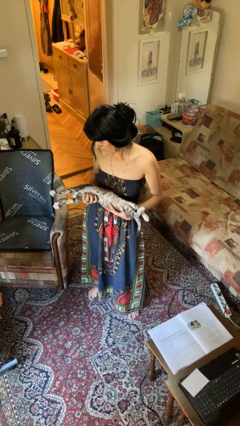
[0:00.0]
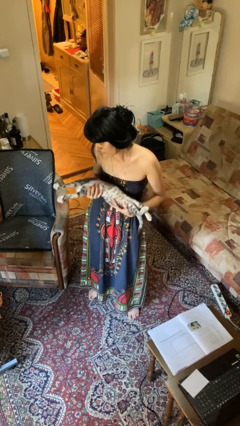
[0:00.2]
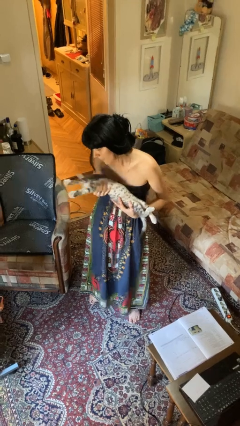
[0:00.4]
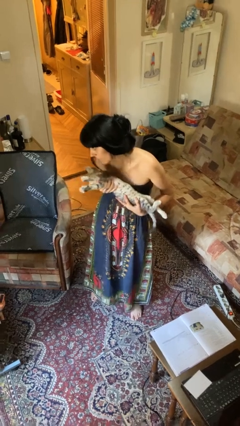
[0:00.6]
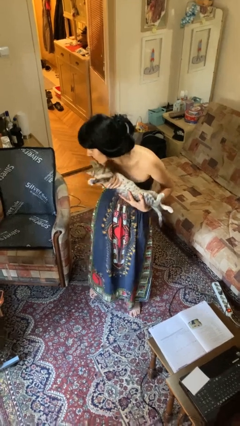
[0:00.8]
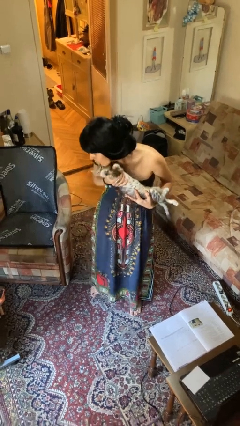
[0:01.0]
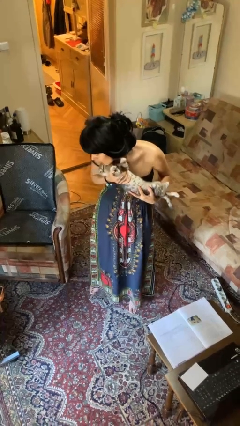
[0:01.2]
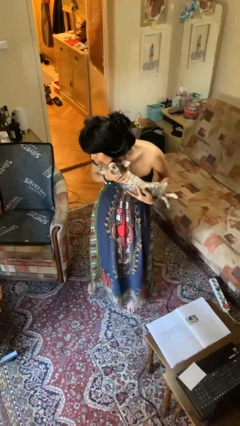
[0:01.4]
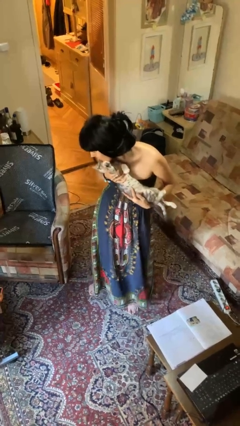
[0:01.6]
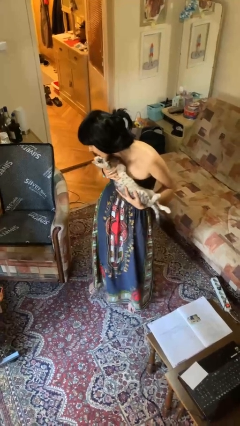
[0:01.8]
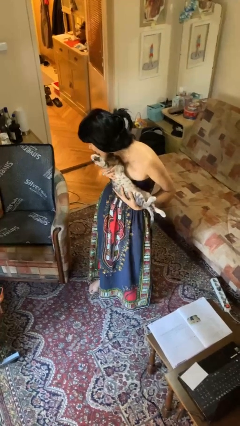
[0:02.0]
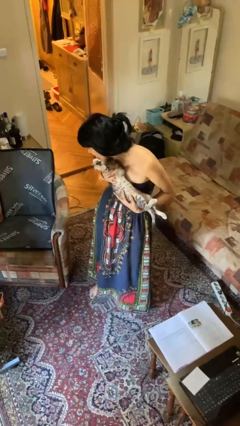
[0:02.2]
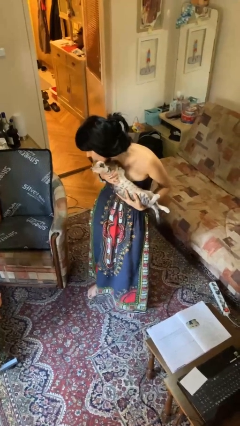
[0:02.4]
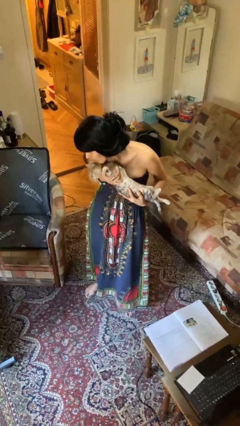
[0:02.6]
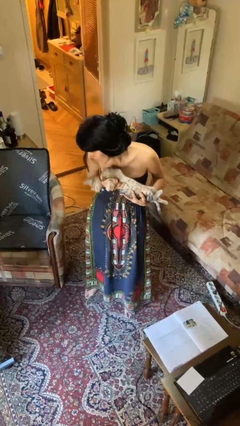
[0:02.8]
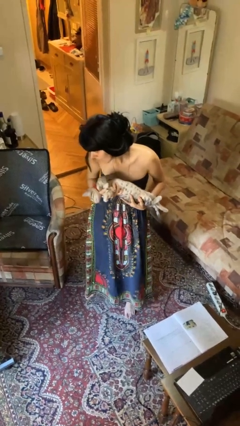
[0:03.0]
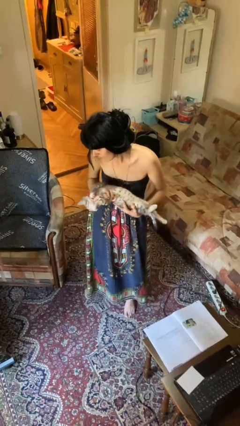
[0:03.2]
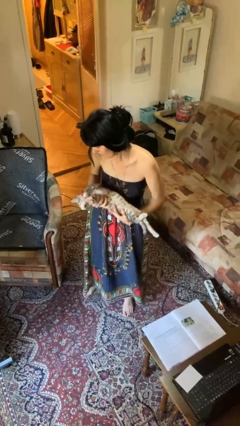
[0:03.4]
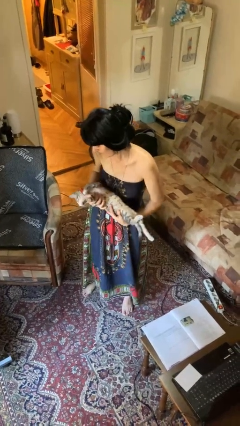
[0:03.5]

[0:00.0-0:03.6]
person hugs cat

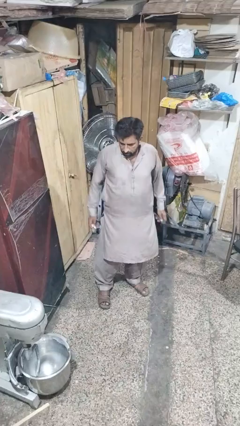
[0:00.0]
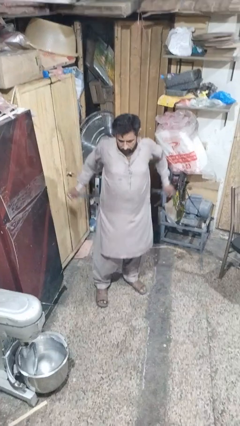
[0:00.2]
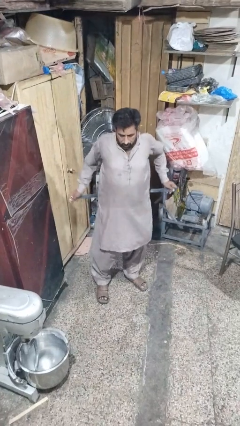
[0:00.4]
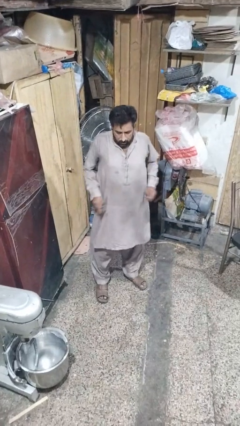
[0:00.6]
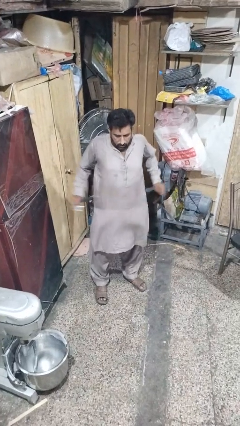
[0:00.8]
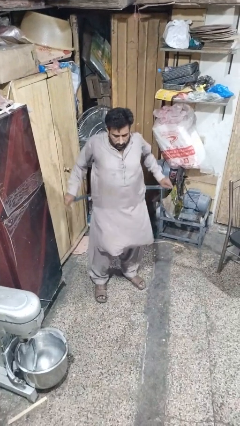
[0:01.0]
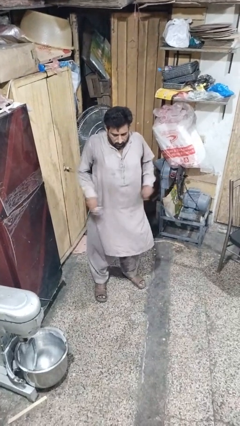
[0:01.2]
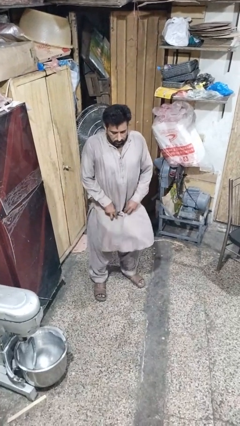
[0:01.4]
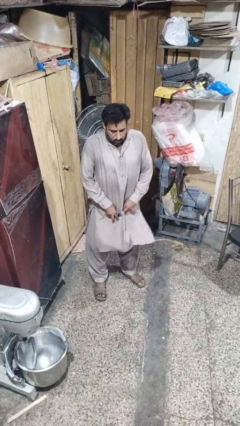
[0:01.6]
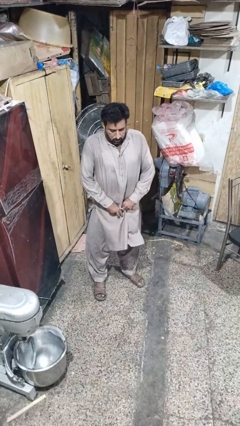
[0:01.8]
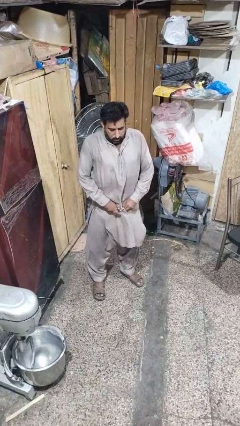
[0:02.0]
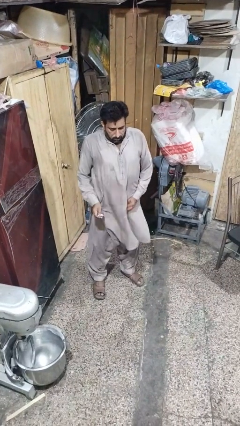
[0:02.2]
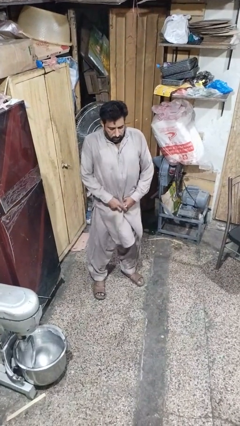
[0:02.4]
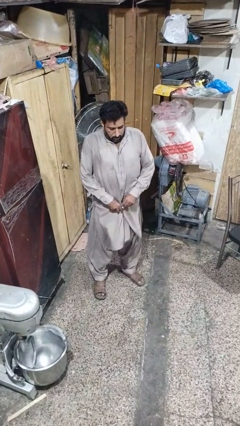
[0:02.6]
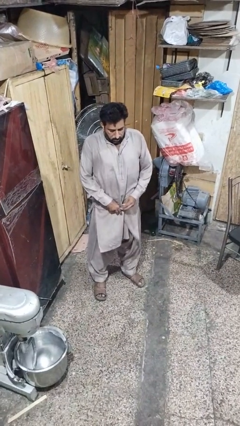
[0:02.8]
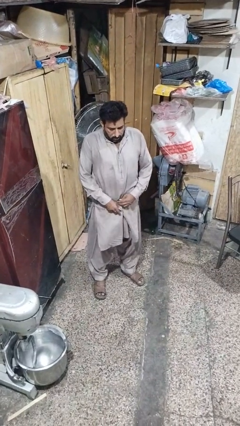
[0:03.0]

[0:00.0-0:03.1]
person puts on belt

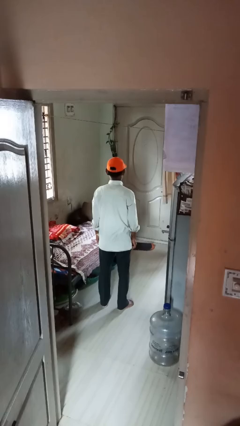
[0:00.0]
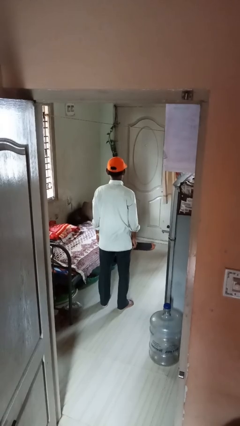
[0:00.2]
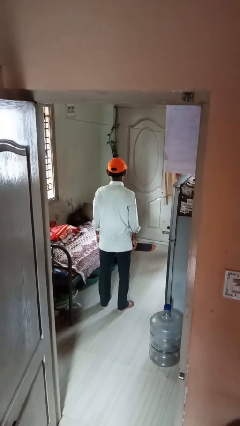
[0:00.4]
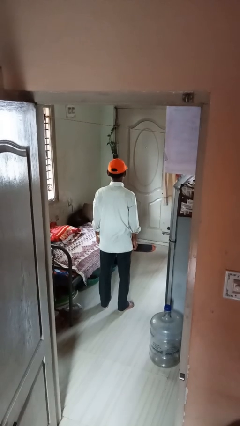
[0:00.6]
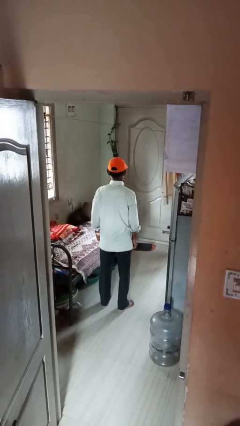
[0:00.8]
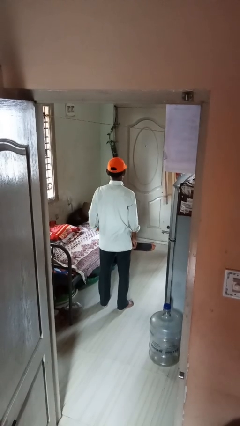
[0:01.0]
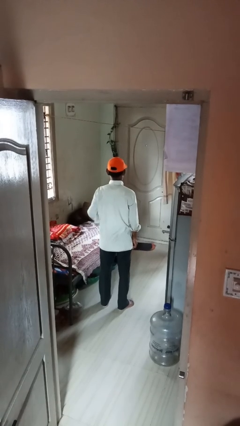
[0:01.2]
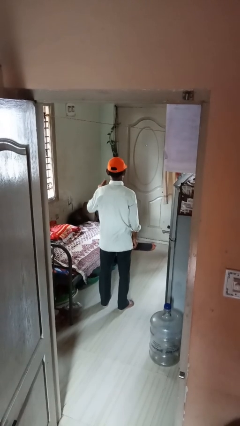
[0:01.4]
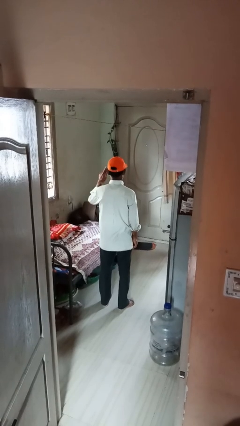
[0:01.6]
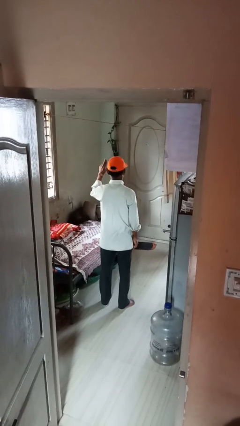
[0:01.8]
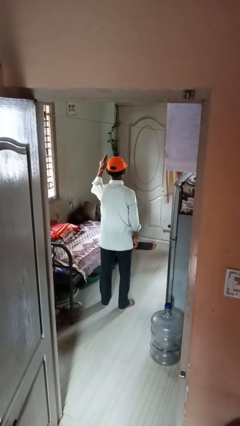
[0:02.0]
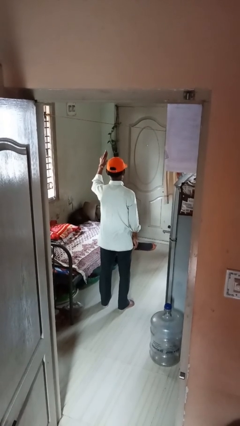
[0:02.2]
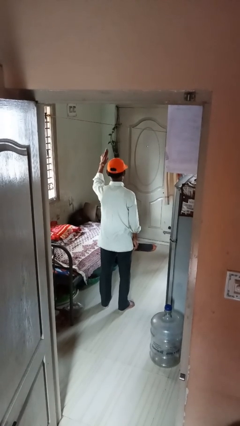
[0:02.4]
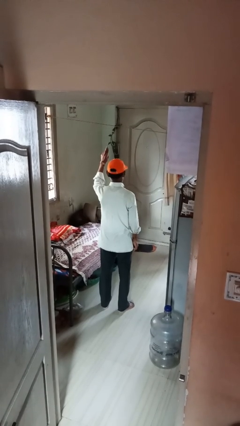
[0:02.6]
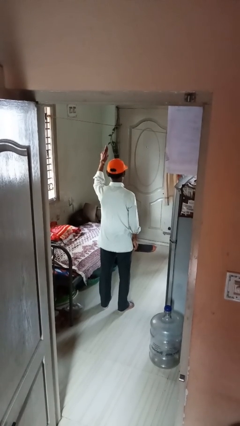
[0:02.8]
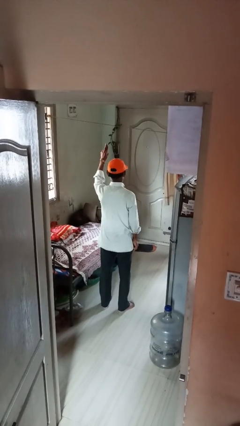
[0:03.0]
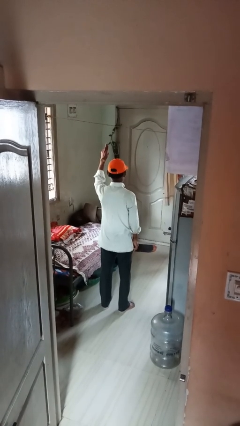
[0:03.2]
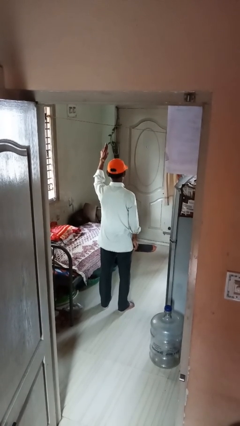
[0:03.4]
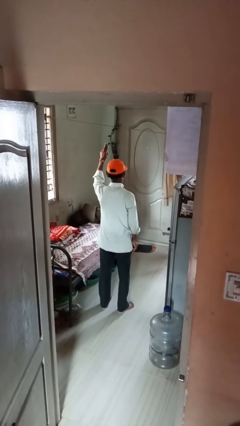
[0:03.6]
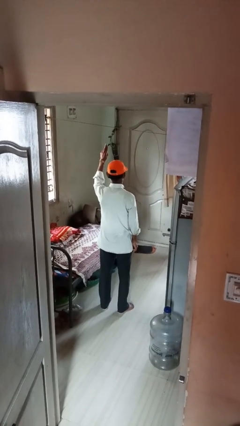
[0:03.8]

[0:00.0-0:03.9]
person gestures swipe up

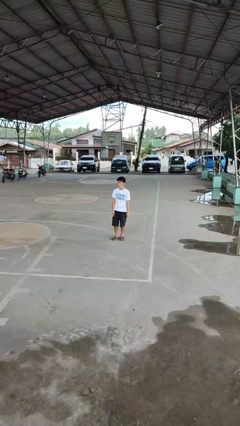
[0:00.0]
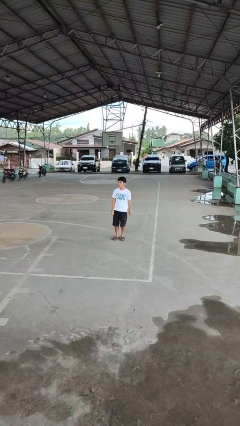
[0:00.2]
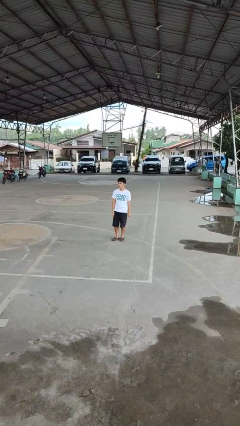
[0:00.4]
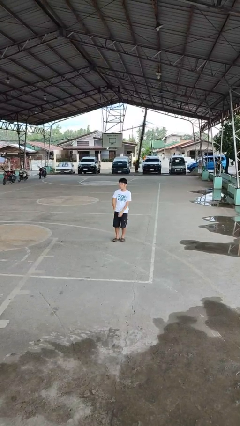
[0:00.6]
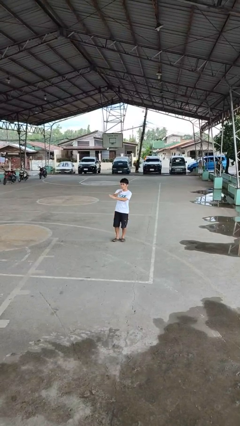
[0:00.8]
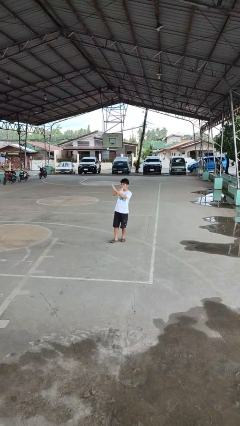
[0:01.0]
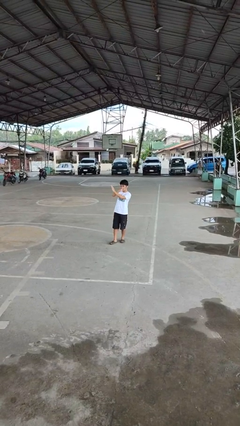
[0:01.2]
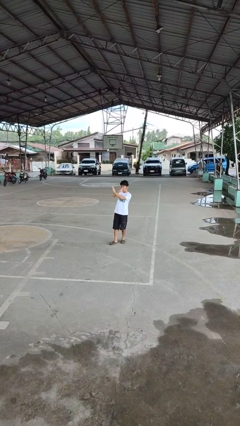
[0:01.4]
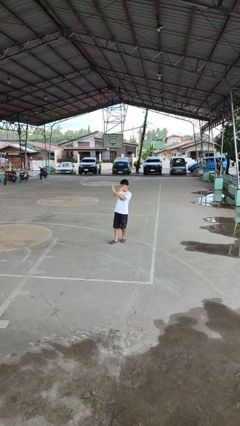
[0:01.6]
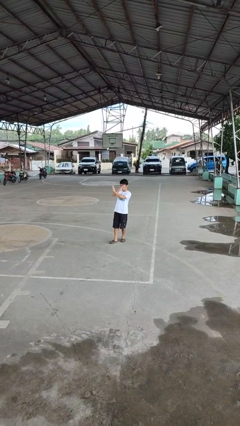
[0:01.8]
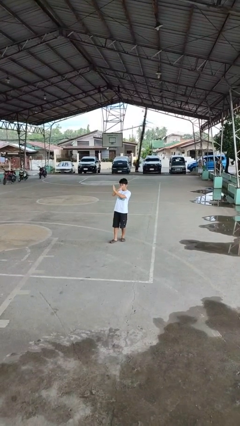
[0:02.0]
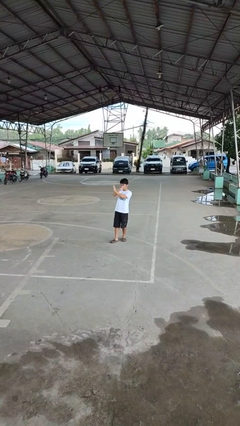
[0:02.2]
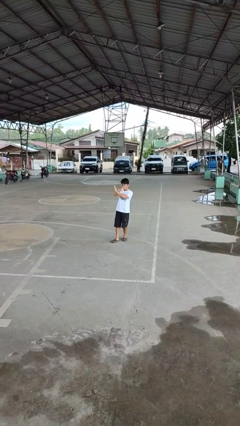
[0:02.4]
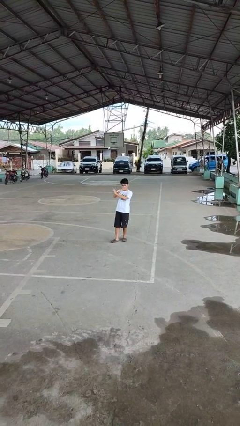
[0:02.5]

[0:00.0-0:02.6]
person gestures arms x

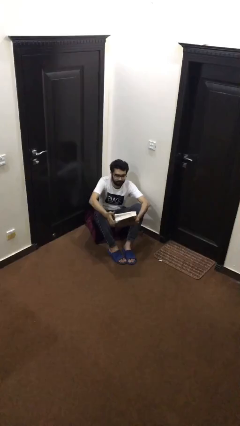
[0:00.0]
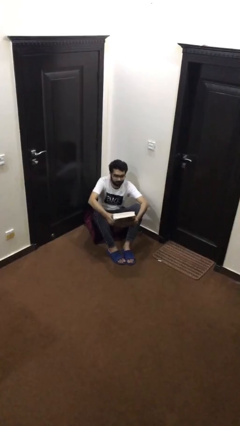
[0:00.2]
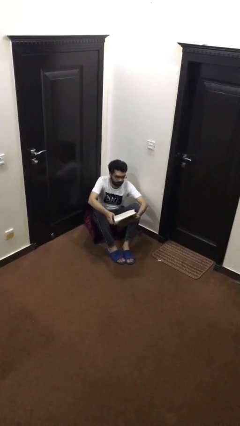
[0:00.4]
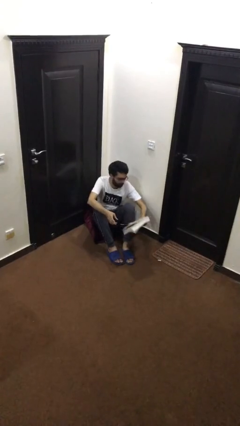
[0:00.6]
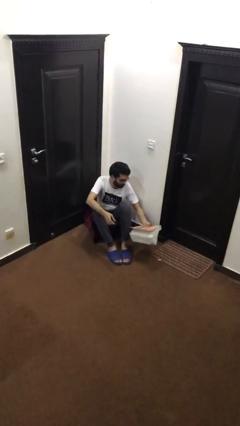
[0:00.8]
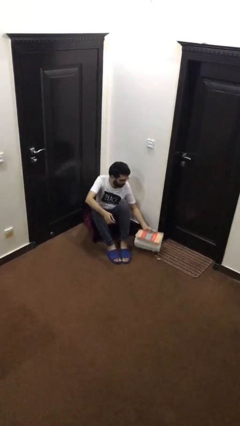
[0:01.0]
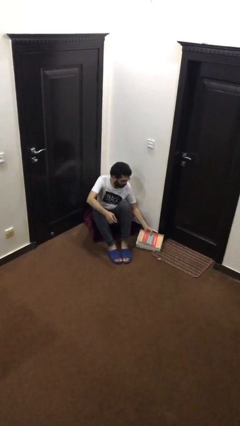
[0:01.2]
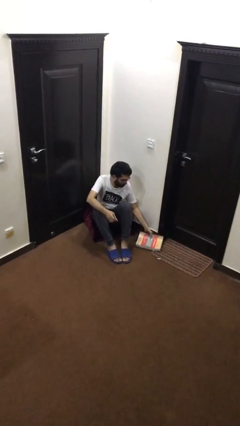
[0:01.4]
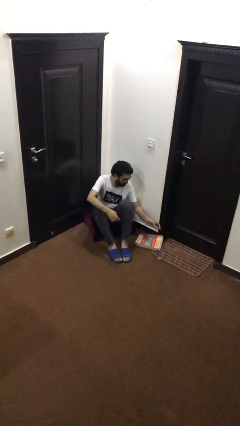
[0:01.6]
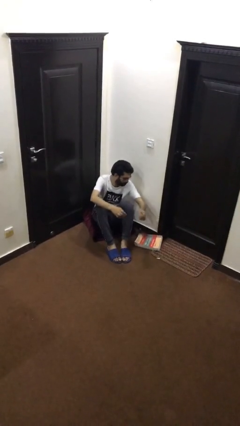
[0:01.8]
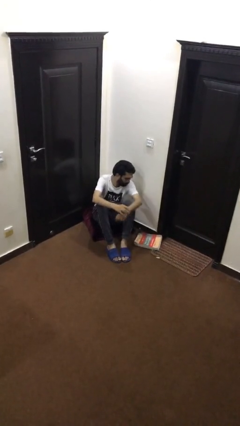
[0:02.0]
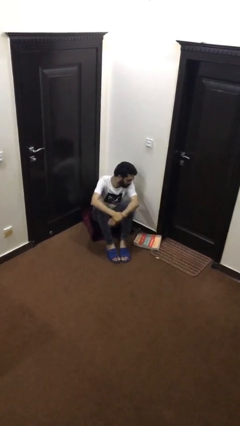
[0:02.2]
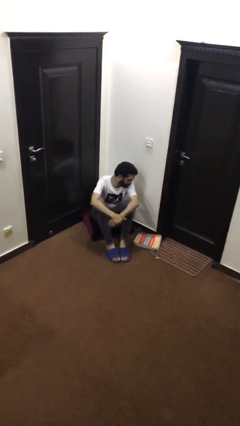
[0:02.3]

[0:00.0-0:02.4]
person puts down object on floor

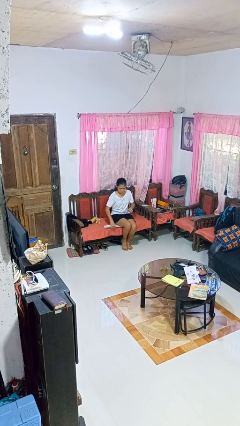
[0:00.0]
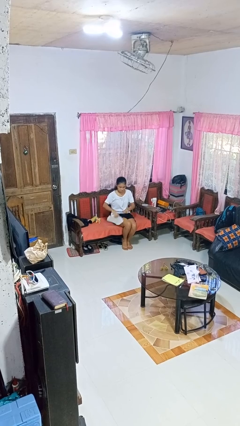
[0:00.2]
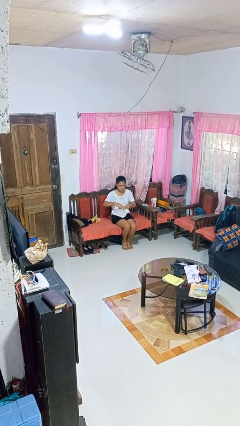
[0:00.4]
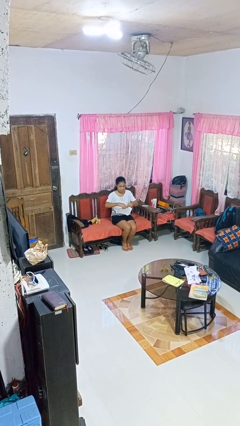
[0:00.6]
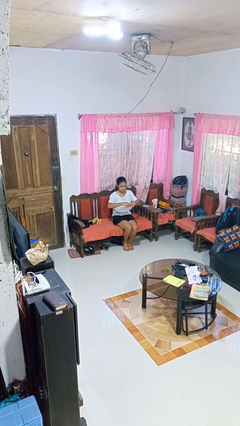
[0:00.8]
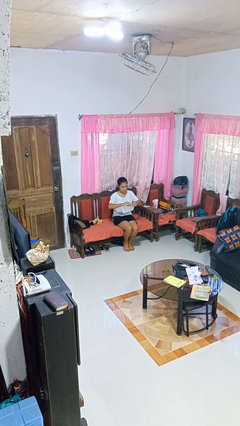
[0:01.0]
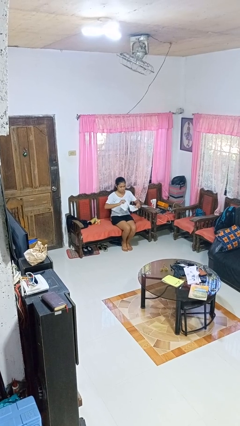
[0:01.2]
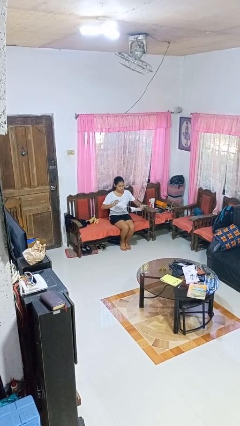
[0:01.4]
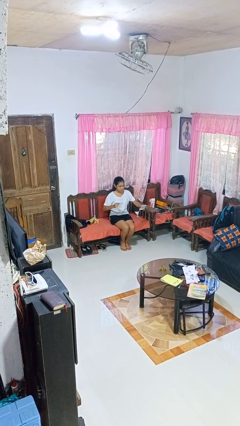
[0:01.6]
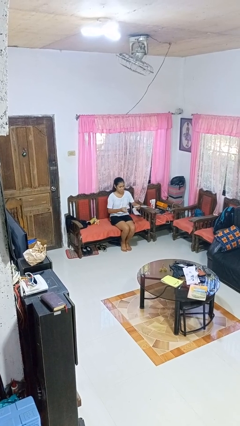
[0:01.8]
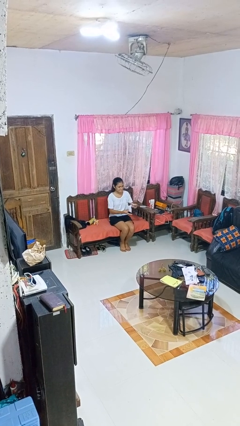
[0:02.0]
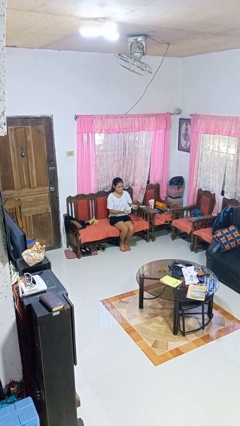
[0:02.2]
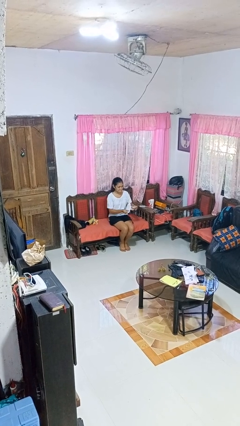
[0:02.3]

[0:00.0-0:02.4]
person tears paper
